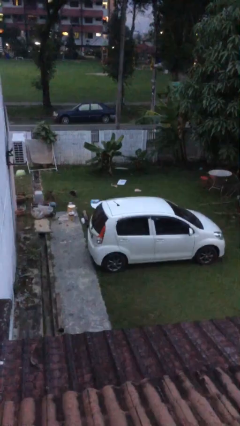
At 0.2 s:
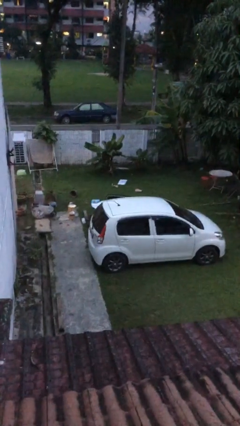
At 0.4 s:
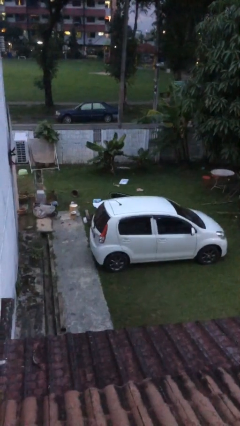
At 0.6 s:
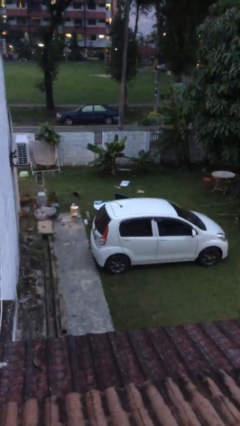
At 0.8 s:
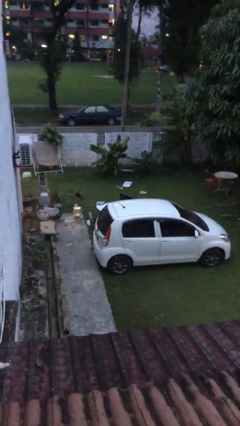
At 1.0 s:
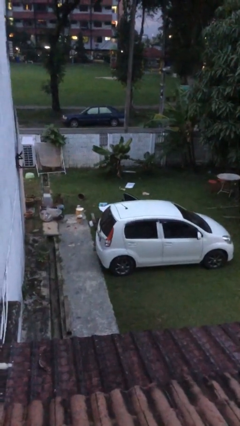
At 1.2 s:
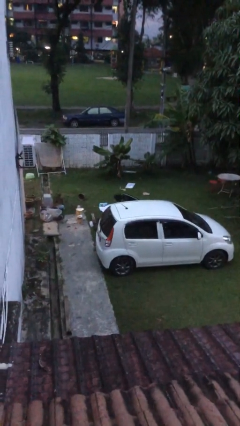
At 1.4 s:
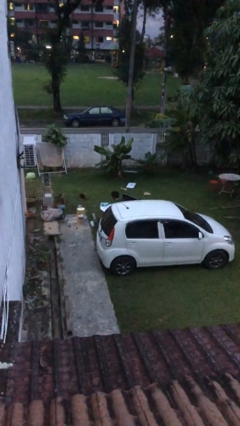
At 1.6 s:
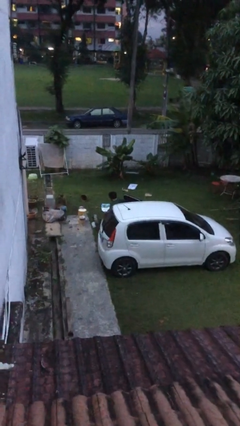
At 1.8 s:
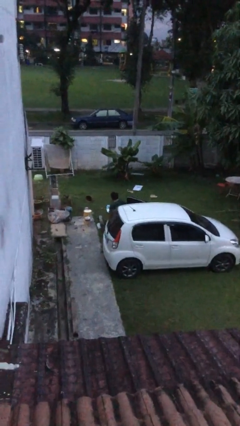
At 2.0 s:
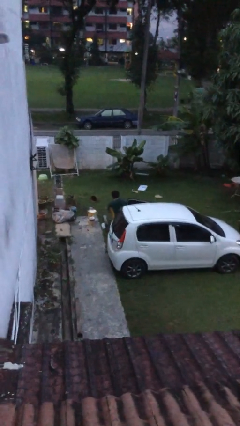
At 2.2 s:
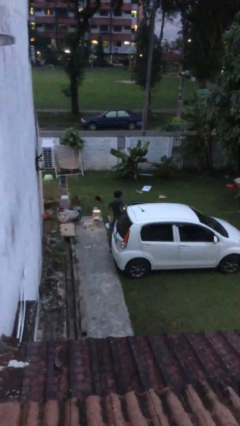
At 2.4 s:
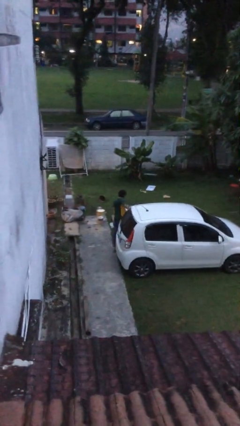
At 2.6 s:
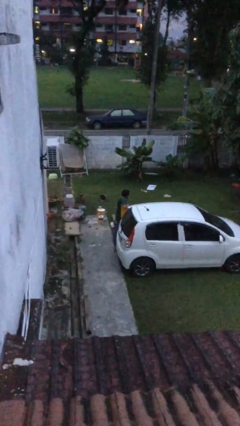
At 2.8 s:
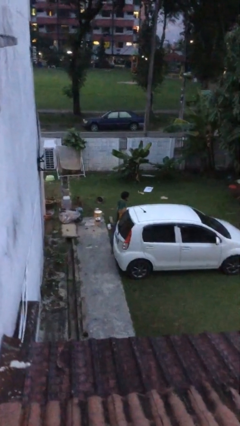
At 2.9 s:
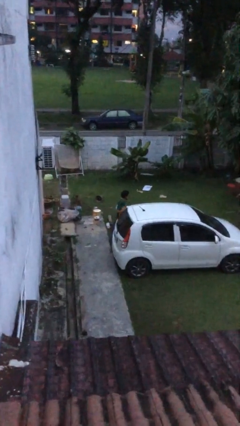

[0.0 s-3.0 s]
car drops off person

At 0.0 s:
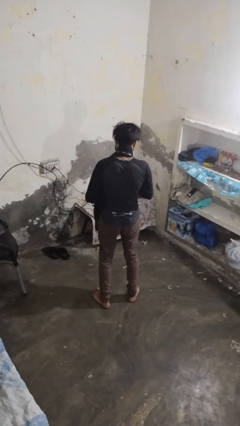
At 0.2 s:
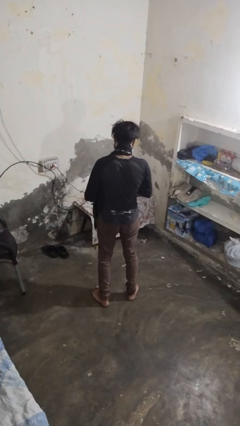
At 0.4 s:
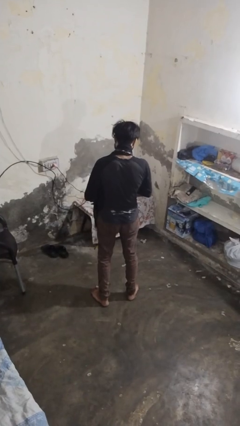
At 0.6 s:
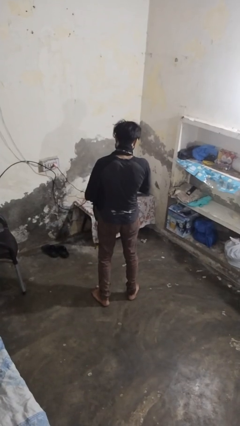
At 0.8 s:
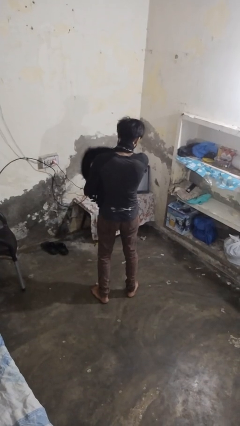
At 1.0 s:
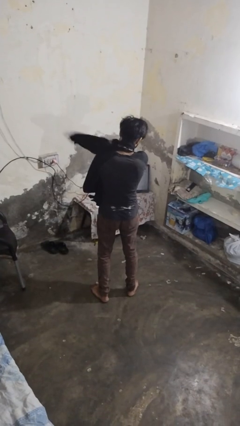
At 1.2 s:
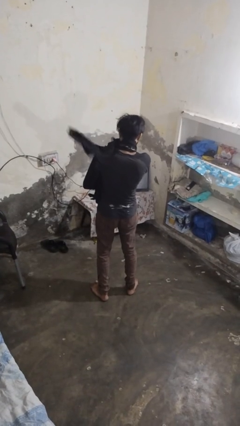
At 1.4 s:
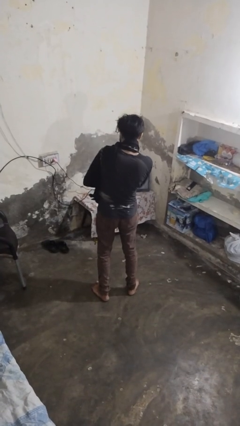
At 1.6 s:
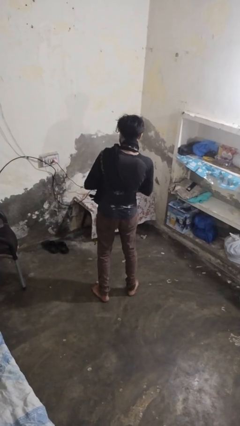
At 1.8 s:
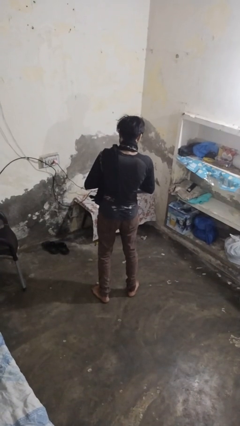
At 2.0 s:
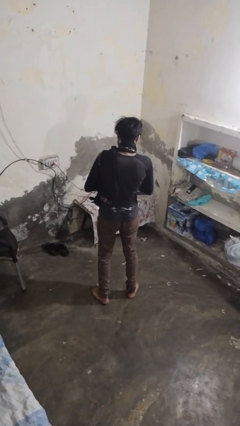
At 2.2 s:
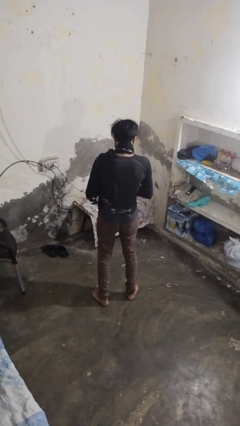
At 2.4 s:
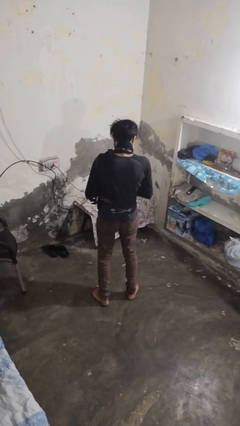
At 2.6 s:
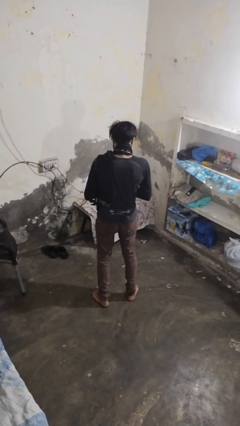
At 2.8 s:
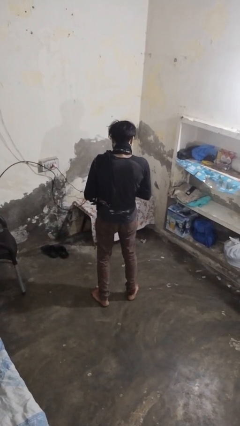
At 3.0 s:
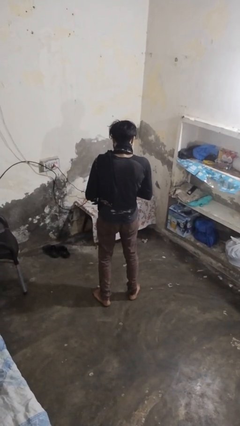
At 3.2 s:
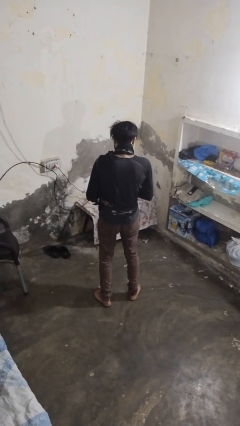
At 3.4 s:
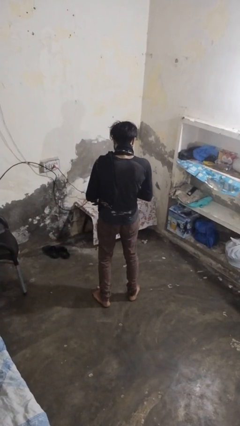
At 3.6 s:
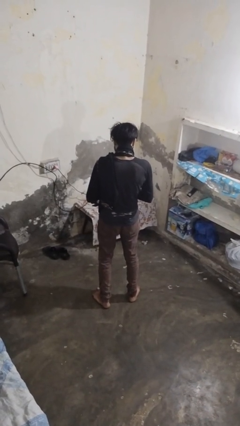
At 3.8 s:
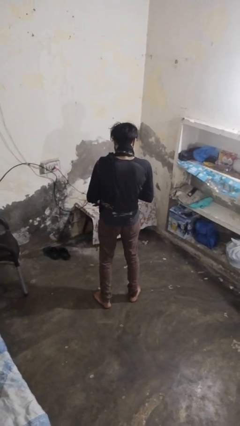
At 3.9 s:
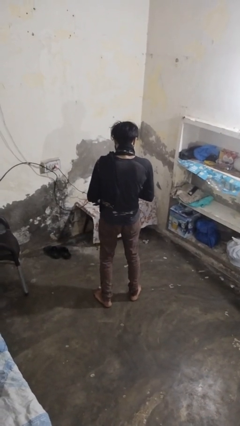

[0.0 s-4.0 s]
person puts on scarf

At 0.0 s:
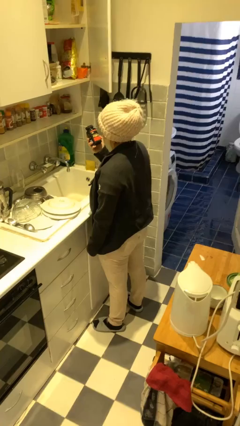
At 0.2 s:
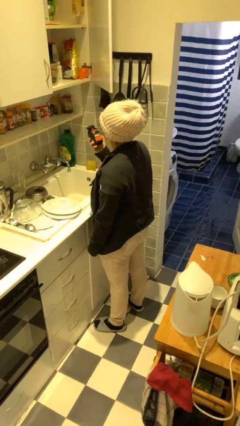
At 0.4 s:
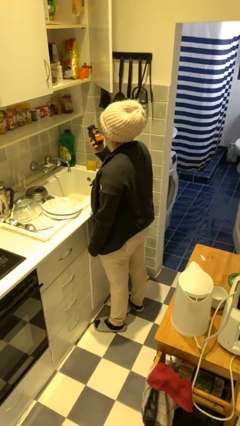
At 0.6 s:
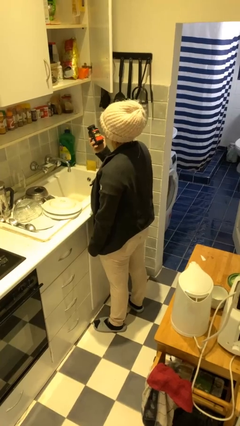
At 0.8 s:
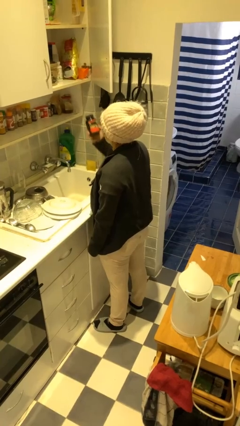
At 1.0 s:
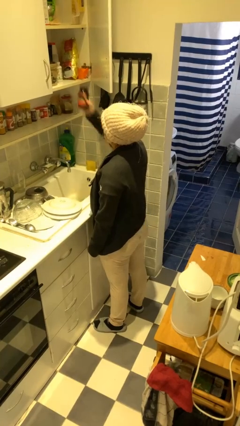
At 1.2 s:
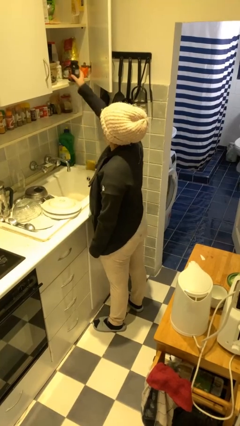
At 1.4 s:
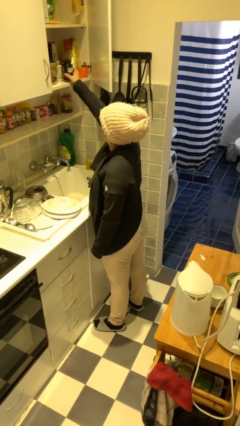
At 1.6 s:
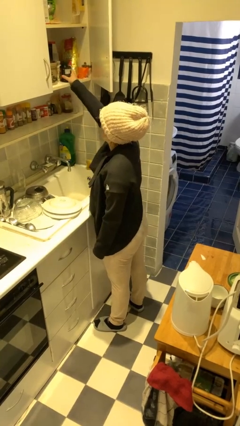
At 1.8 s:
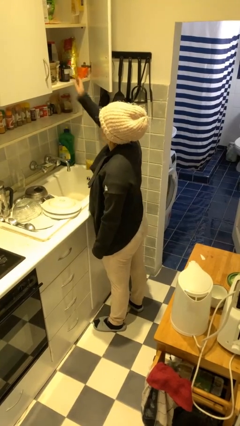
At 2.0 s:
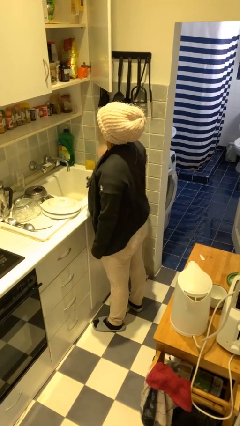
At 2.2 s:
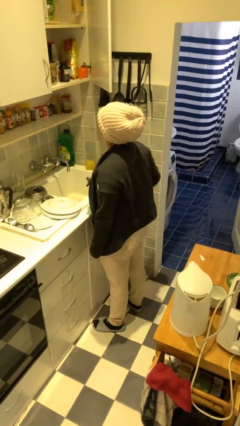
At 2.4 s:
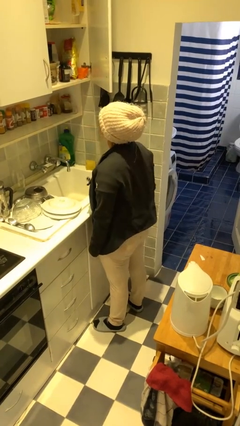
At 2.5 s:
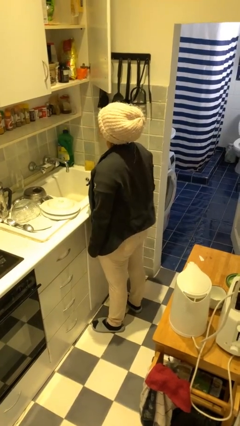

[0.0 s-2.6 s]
person puts down object into cabinet

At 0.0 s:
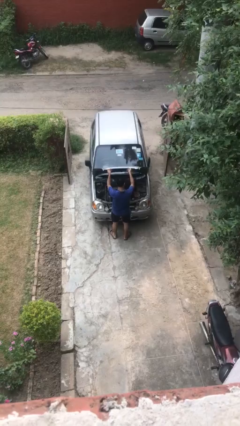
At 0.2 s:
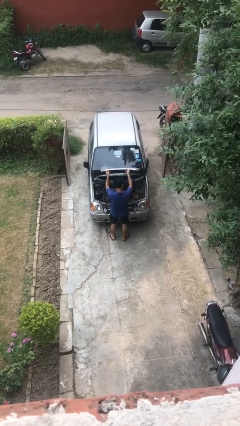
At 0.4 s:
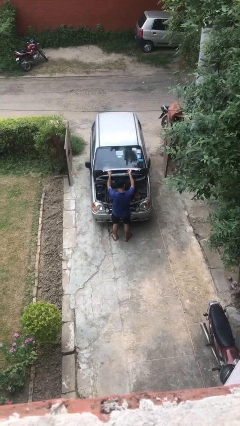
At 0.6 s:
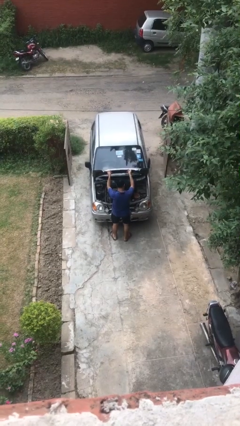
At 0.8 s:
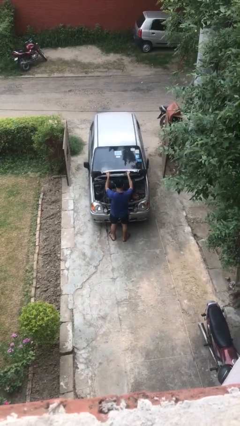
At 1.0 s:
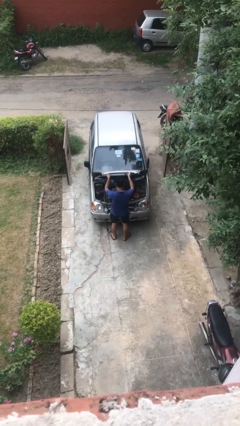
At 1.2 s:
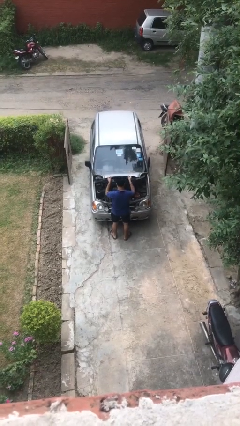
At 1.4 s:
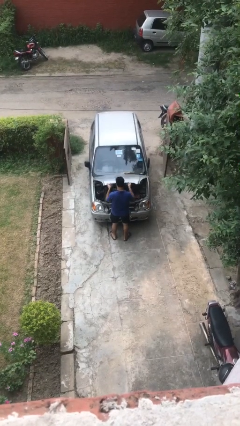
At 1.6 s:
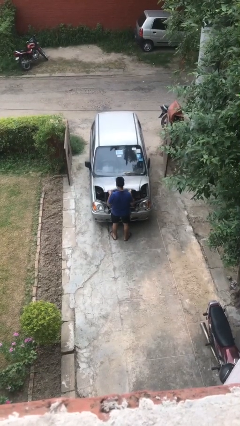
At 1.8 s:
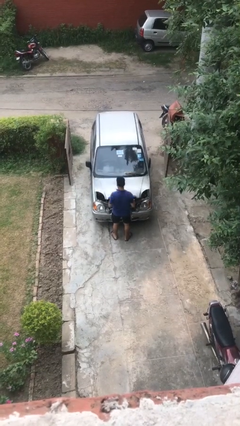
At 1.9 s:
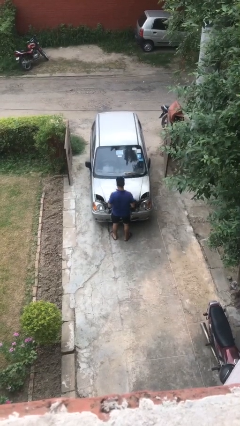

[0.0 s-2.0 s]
person closes car hood

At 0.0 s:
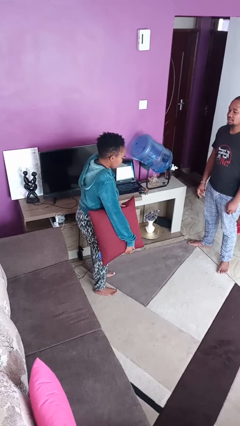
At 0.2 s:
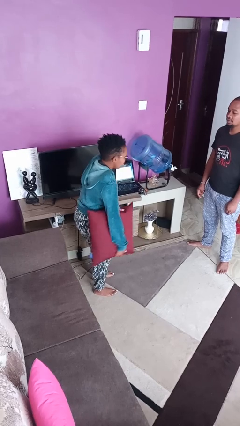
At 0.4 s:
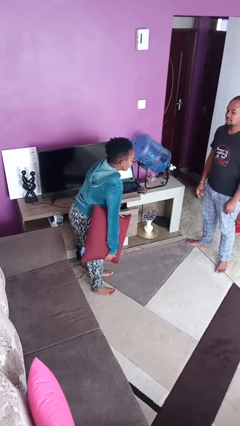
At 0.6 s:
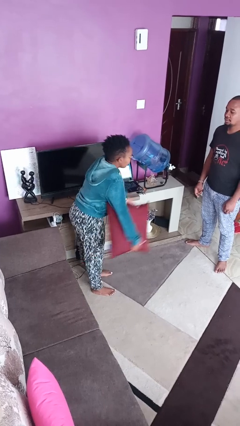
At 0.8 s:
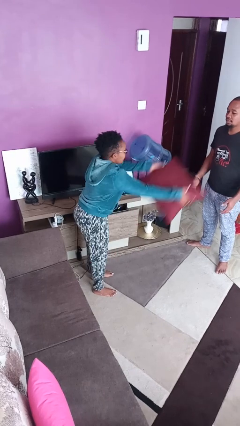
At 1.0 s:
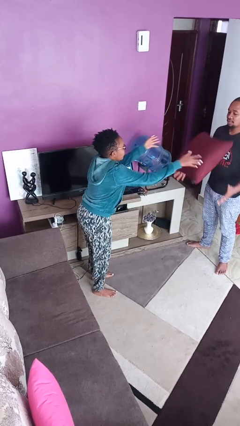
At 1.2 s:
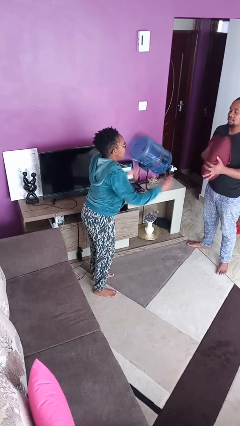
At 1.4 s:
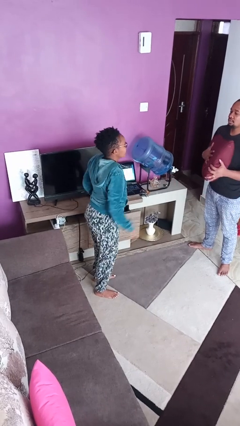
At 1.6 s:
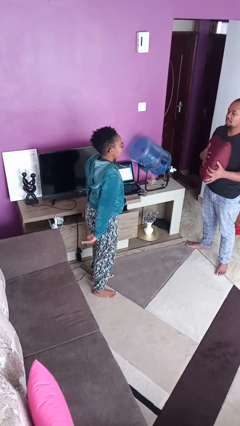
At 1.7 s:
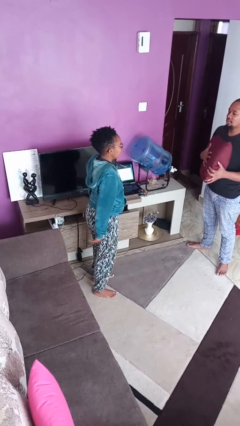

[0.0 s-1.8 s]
person throws object to person

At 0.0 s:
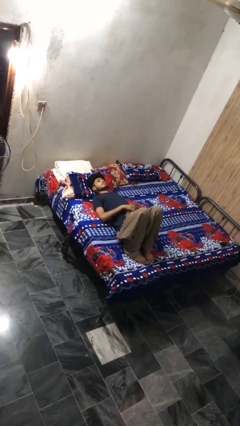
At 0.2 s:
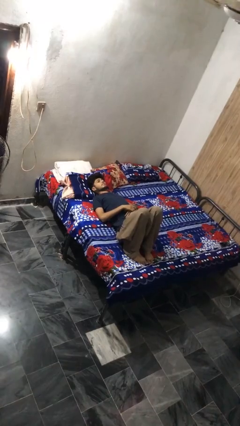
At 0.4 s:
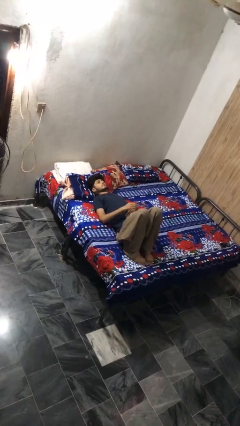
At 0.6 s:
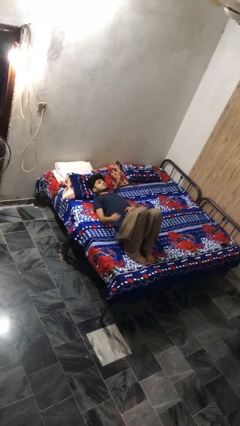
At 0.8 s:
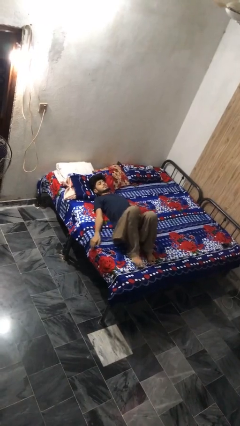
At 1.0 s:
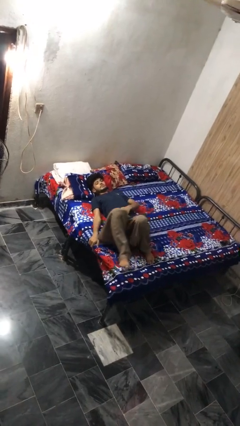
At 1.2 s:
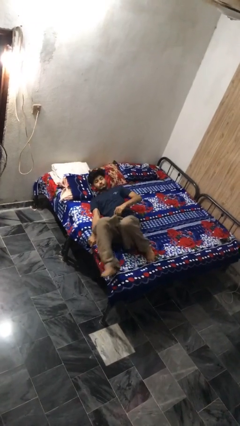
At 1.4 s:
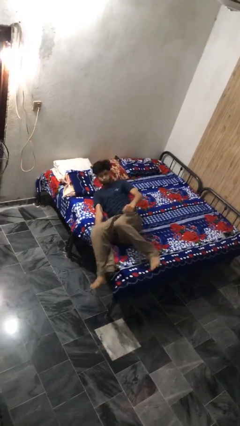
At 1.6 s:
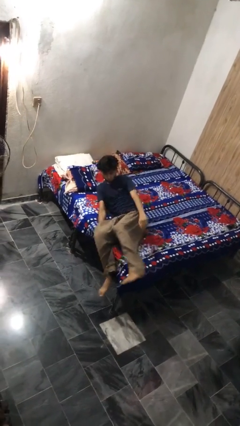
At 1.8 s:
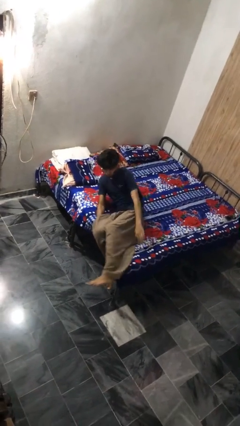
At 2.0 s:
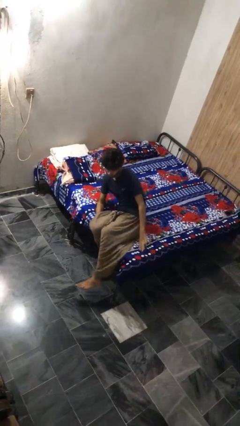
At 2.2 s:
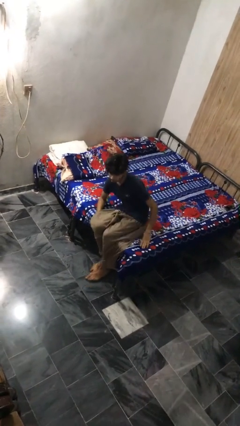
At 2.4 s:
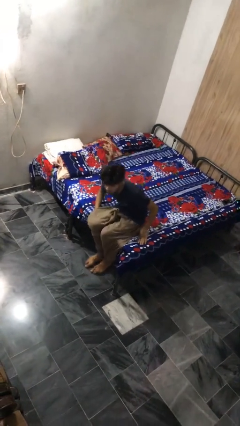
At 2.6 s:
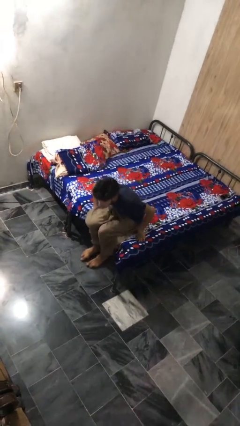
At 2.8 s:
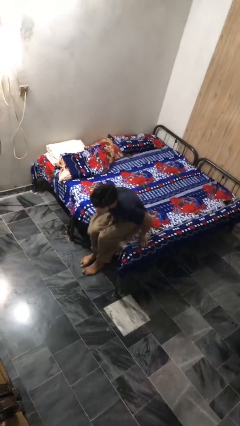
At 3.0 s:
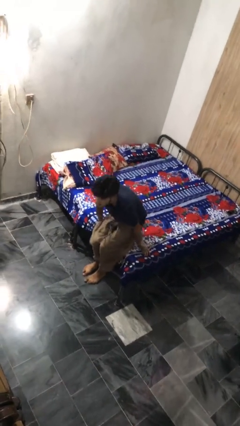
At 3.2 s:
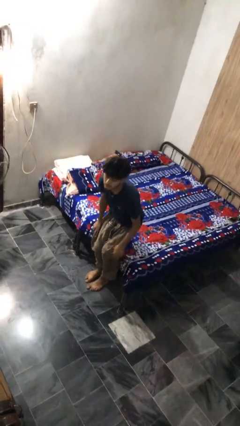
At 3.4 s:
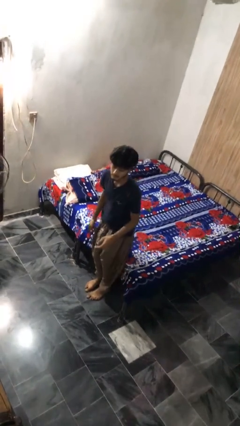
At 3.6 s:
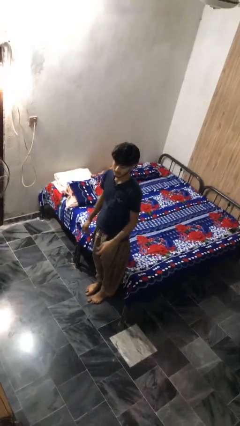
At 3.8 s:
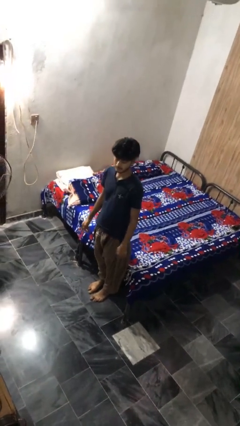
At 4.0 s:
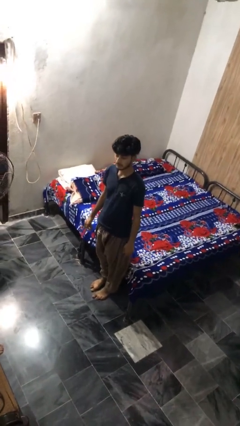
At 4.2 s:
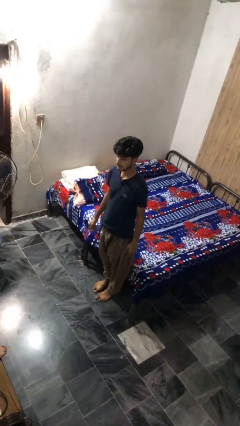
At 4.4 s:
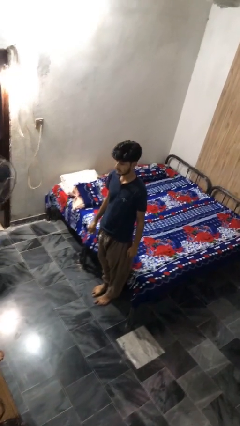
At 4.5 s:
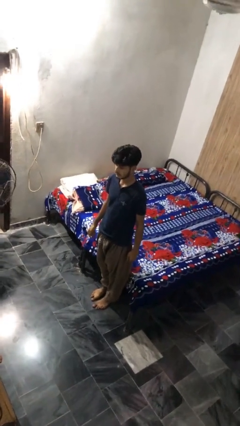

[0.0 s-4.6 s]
person stands up
